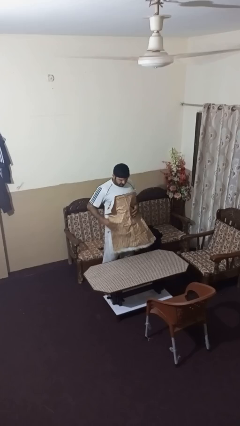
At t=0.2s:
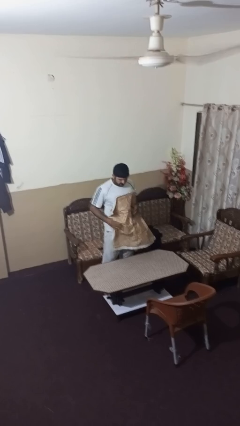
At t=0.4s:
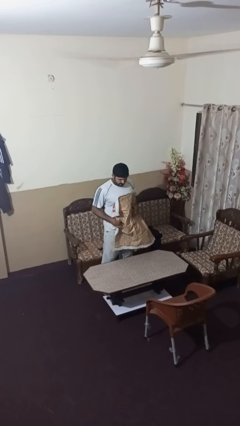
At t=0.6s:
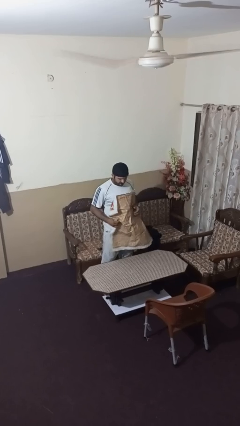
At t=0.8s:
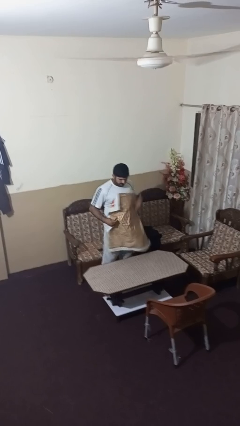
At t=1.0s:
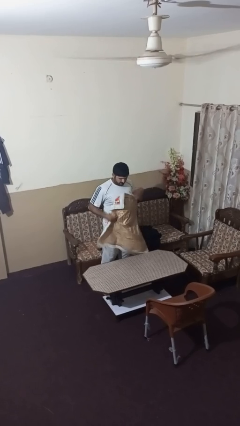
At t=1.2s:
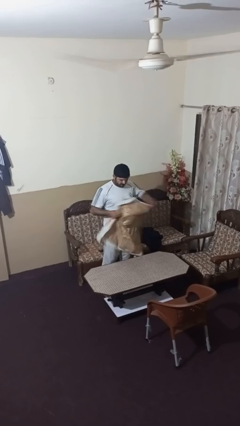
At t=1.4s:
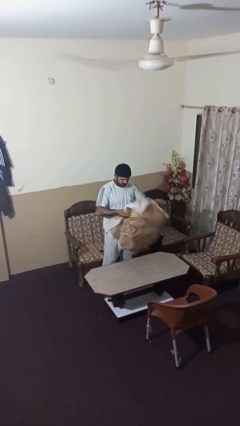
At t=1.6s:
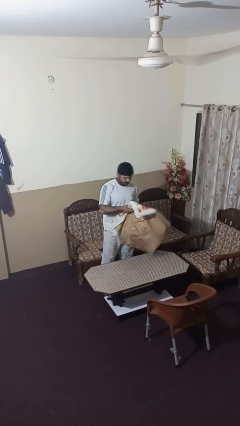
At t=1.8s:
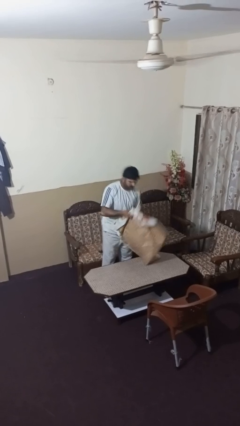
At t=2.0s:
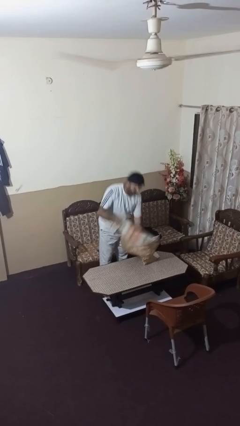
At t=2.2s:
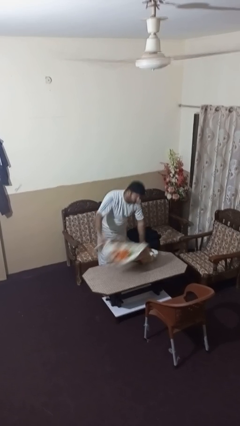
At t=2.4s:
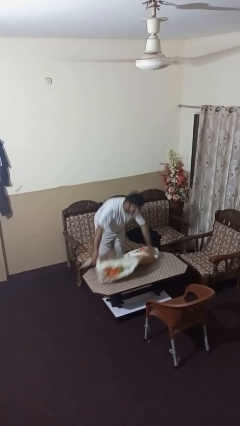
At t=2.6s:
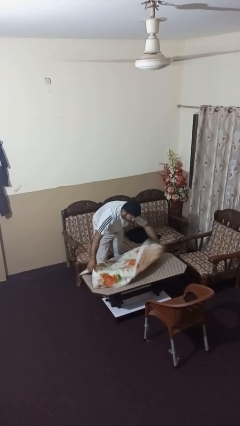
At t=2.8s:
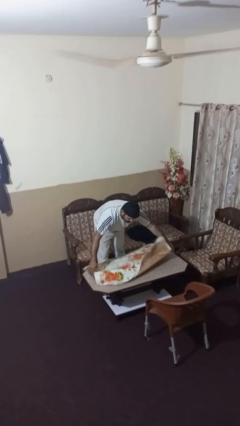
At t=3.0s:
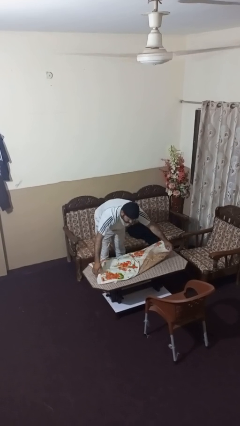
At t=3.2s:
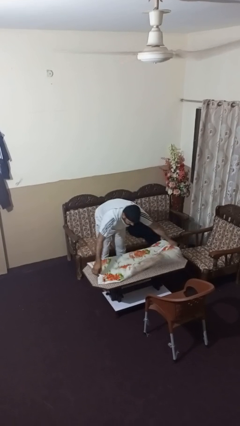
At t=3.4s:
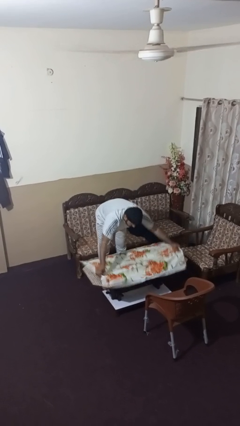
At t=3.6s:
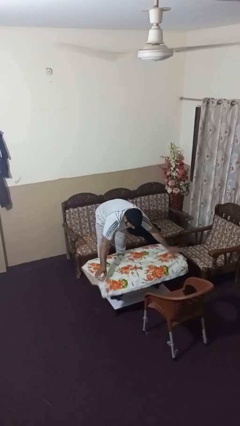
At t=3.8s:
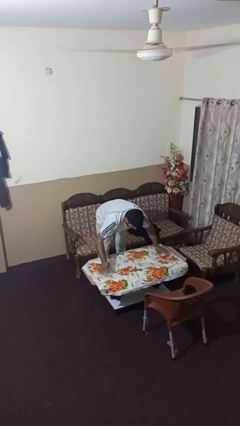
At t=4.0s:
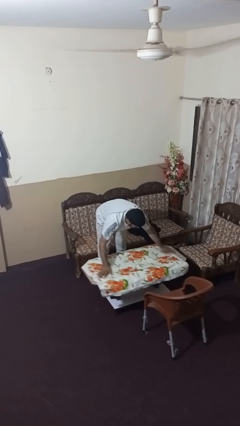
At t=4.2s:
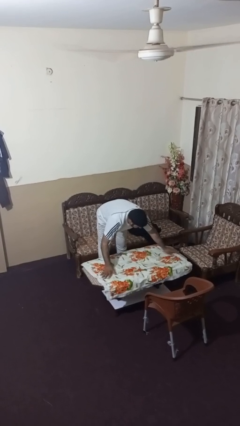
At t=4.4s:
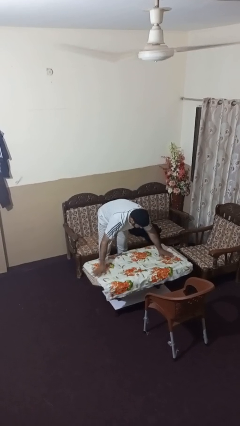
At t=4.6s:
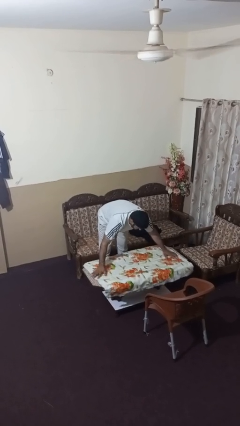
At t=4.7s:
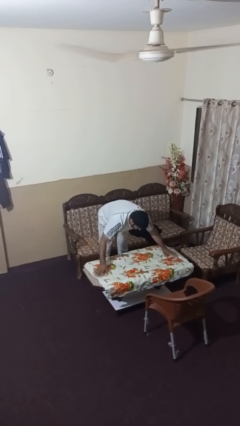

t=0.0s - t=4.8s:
person spreads tablecloth

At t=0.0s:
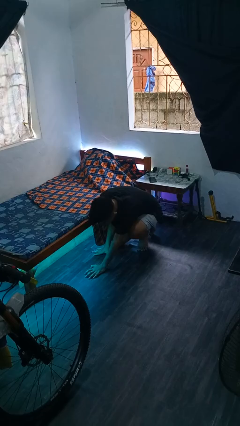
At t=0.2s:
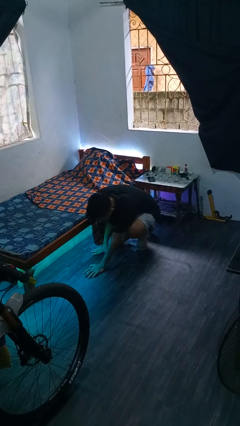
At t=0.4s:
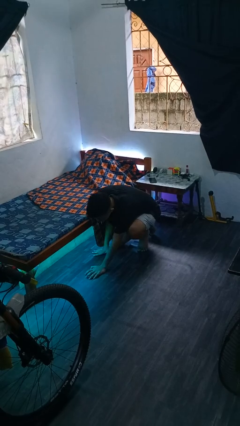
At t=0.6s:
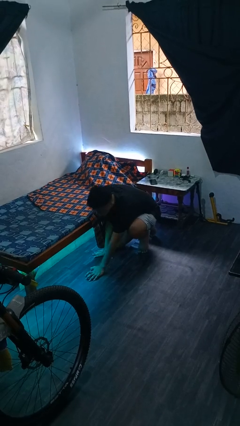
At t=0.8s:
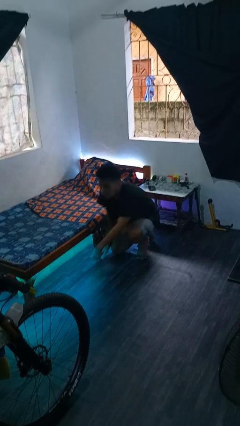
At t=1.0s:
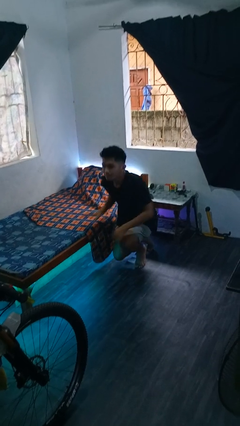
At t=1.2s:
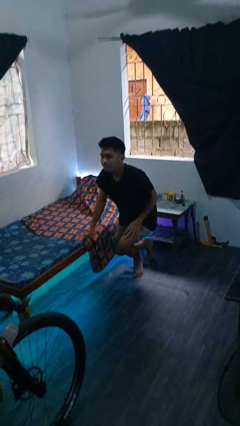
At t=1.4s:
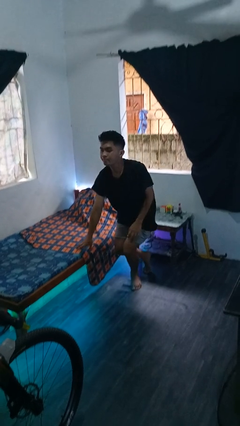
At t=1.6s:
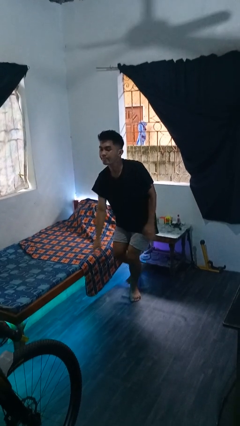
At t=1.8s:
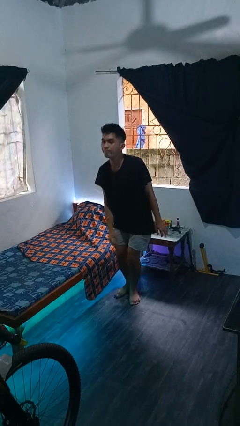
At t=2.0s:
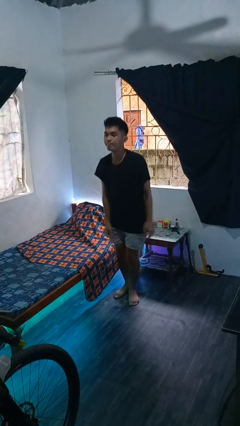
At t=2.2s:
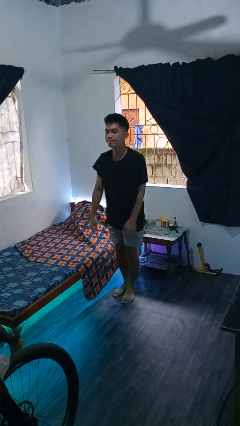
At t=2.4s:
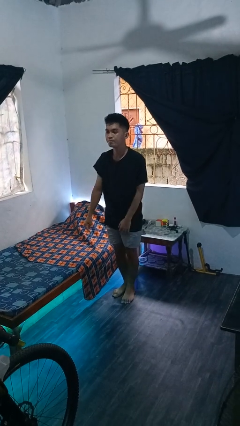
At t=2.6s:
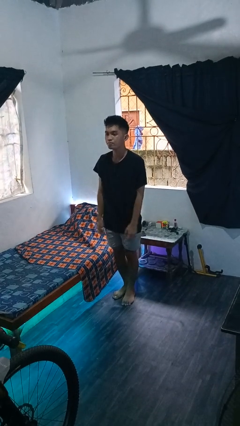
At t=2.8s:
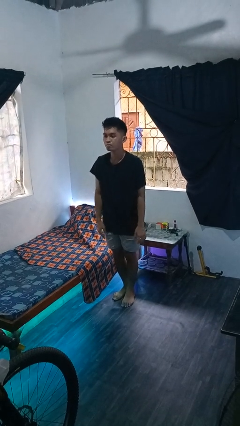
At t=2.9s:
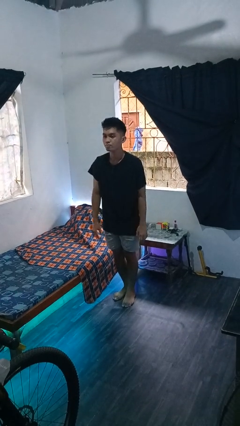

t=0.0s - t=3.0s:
person stands up from floor

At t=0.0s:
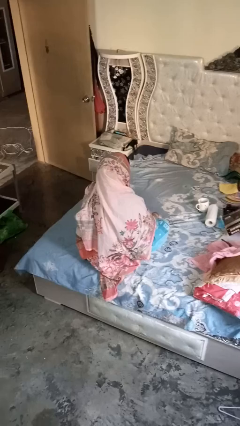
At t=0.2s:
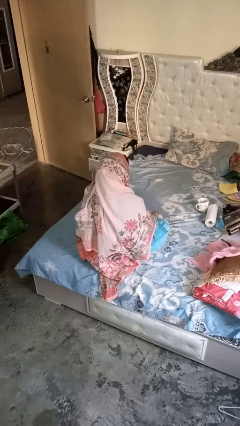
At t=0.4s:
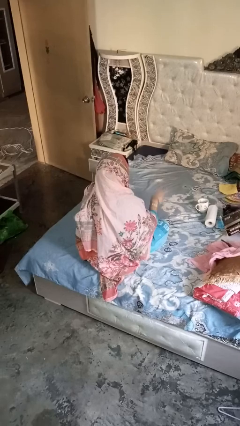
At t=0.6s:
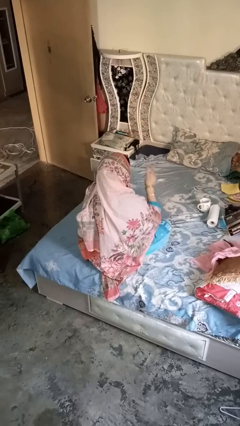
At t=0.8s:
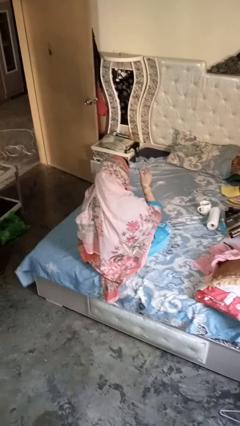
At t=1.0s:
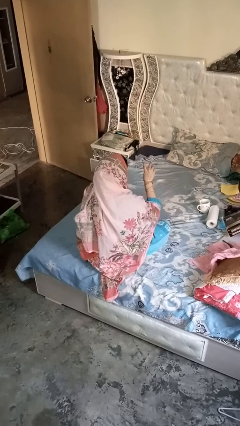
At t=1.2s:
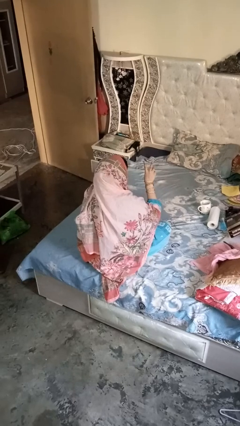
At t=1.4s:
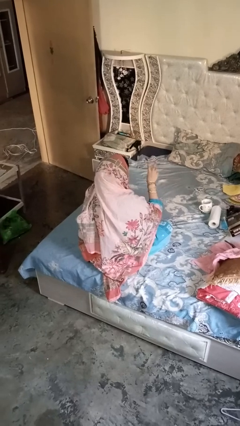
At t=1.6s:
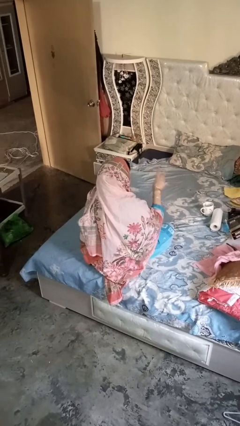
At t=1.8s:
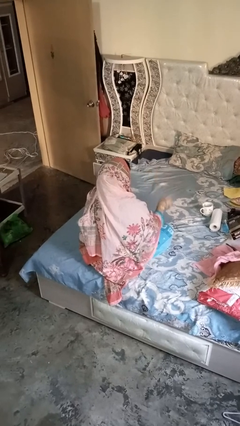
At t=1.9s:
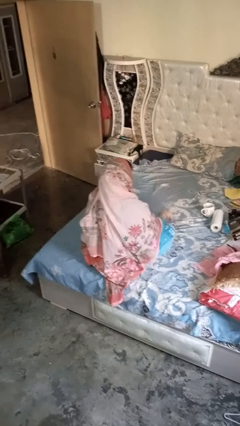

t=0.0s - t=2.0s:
person gestures be quiet

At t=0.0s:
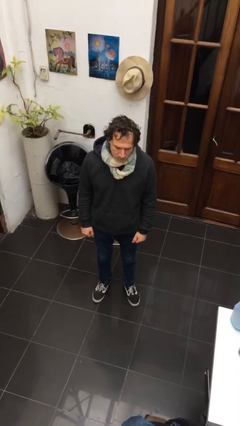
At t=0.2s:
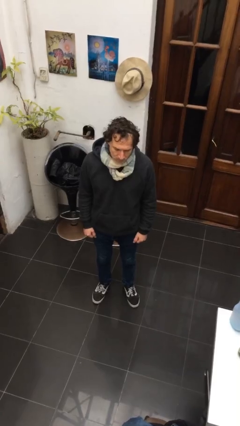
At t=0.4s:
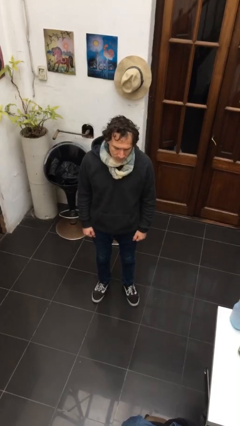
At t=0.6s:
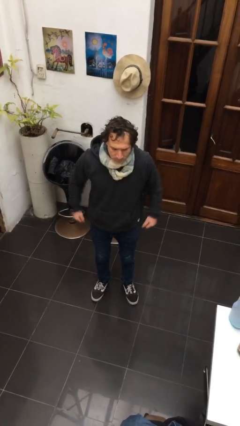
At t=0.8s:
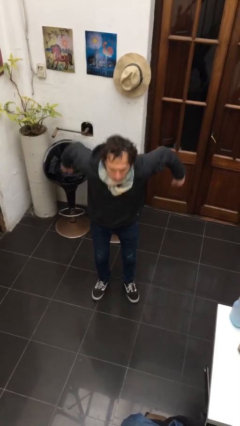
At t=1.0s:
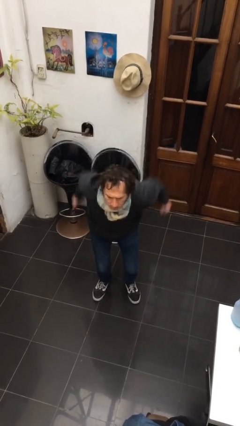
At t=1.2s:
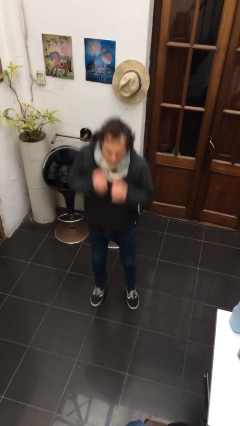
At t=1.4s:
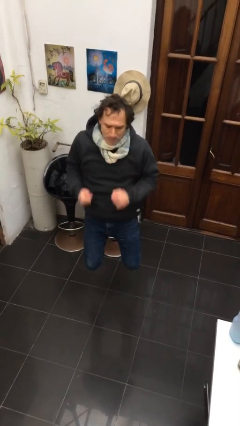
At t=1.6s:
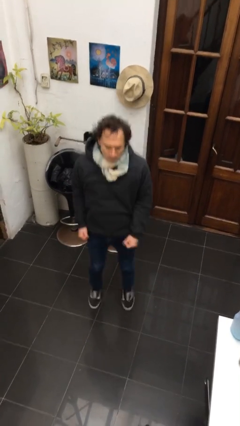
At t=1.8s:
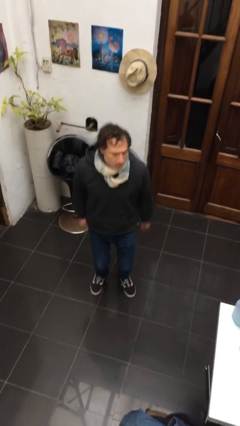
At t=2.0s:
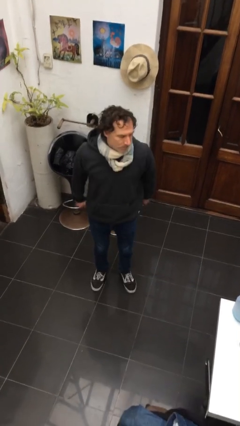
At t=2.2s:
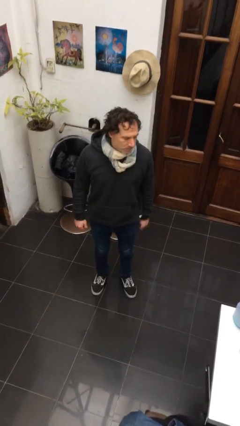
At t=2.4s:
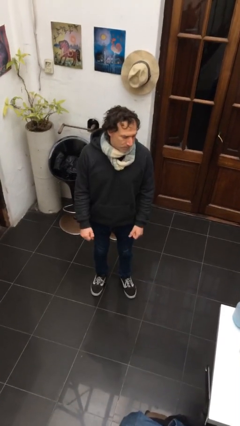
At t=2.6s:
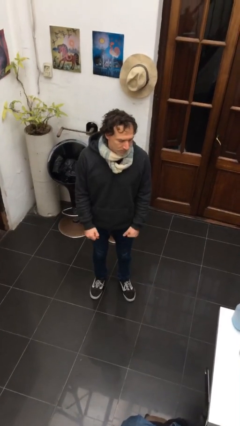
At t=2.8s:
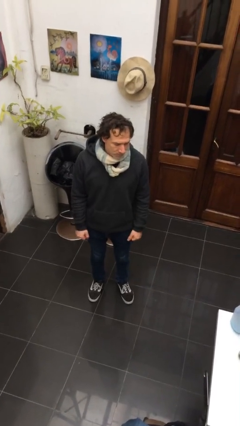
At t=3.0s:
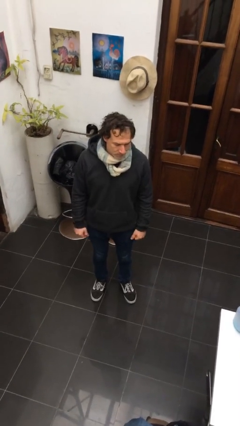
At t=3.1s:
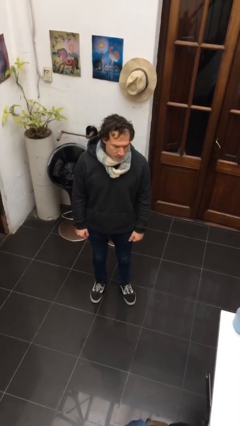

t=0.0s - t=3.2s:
person jumps

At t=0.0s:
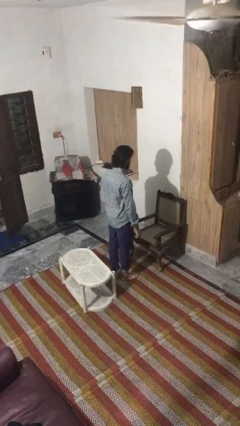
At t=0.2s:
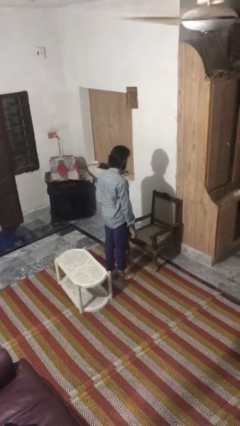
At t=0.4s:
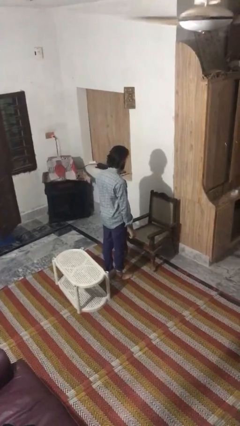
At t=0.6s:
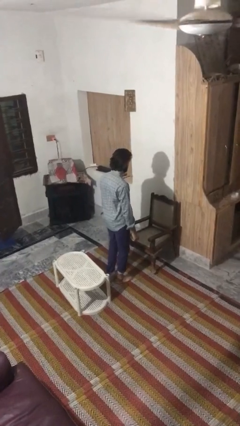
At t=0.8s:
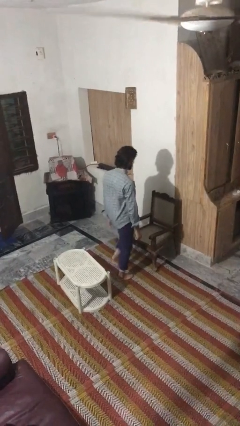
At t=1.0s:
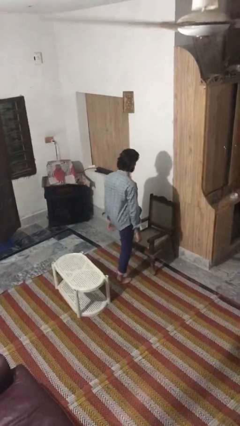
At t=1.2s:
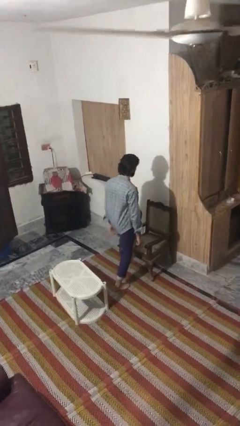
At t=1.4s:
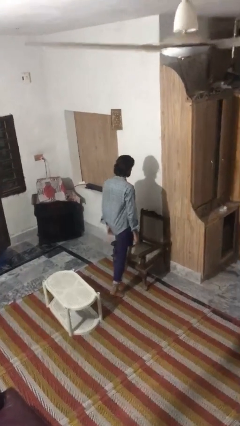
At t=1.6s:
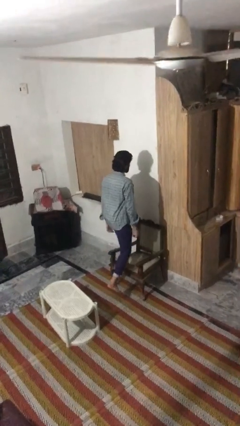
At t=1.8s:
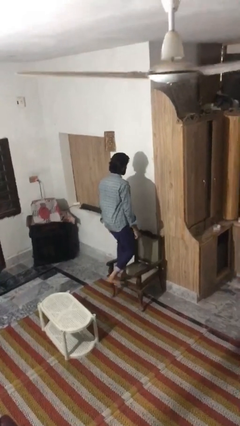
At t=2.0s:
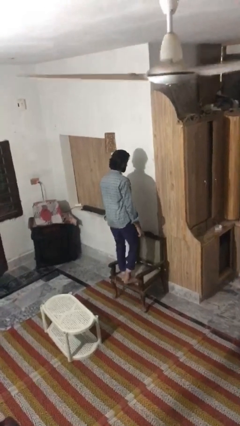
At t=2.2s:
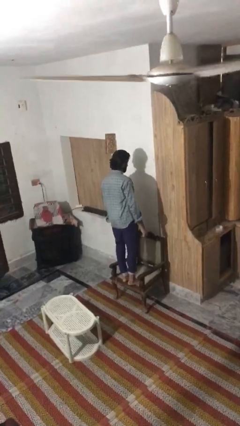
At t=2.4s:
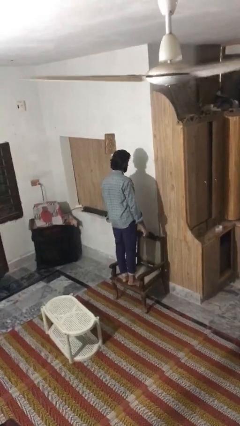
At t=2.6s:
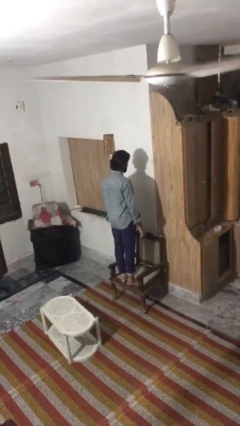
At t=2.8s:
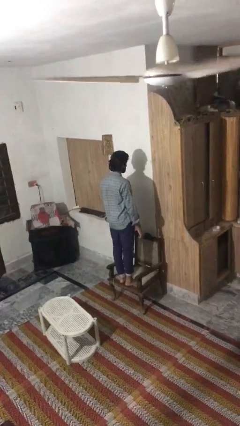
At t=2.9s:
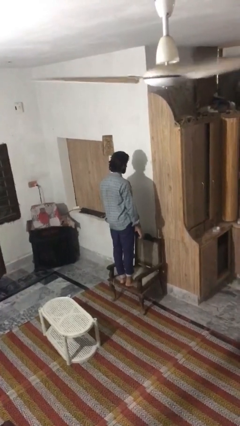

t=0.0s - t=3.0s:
person climbs on chair

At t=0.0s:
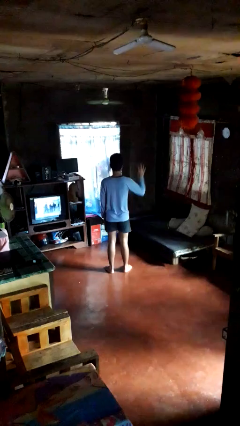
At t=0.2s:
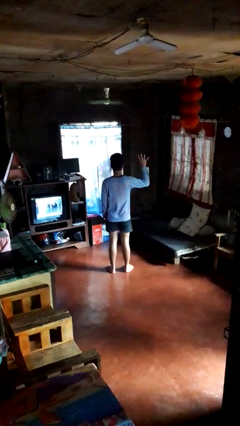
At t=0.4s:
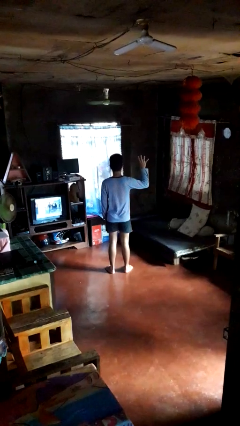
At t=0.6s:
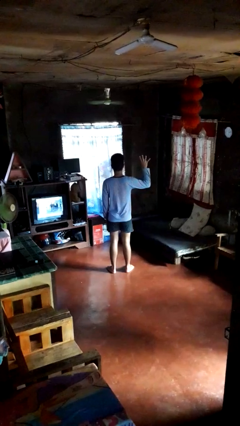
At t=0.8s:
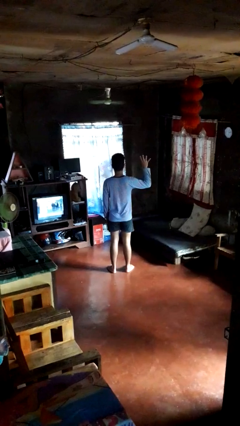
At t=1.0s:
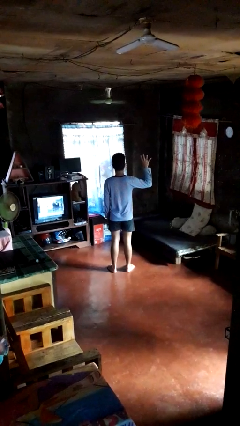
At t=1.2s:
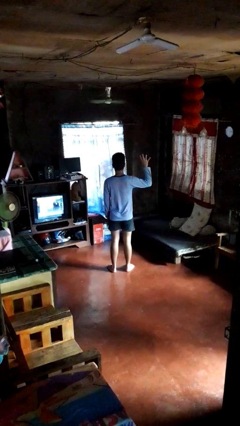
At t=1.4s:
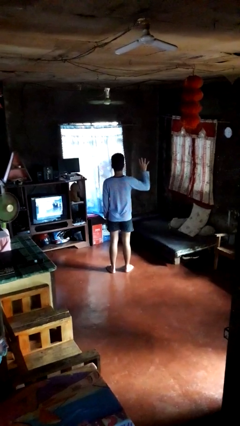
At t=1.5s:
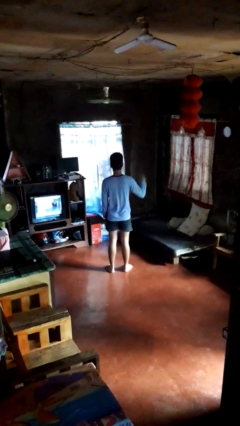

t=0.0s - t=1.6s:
person gestures number four
